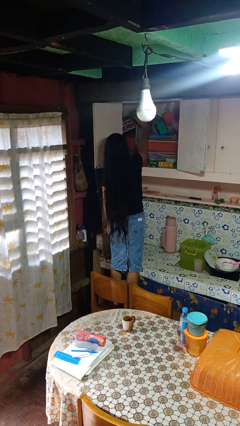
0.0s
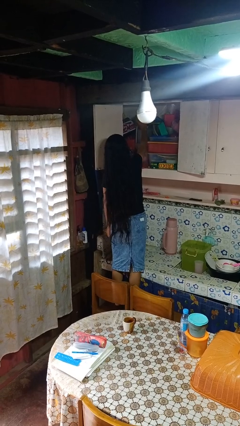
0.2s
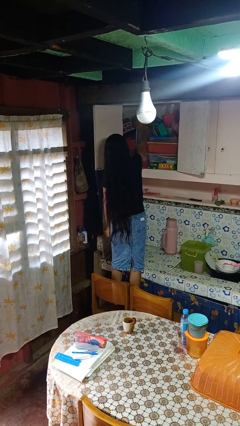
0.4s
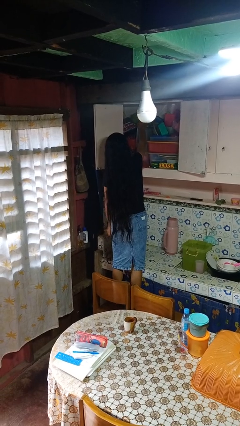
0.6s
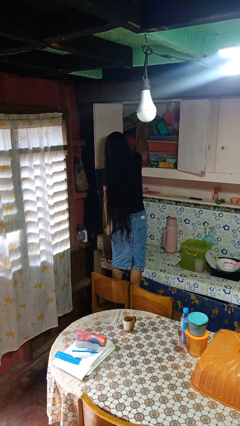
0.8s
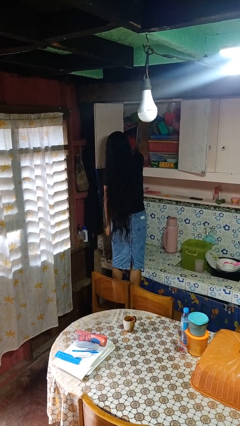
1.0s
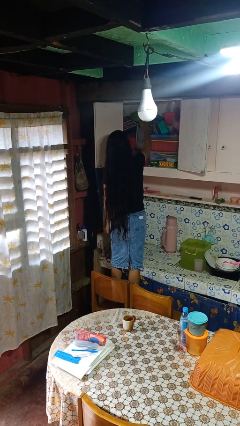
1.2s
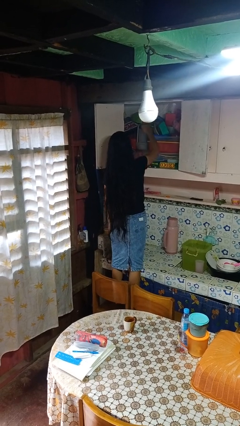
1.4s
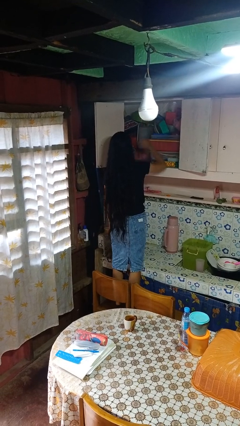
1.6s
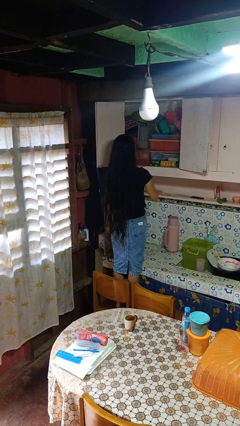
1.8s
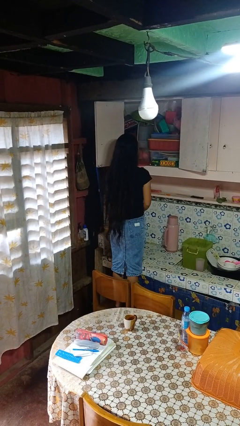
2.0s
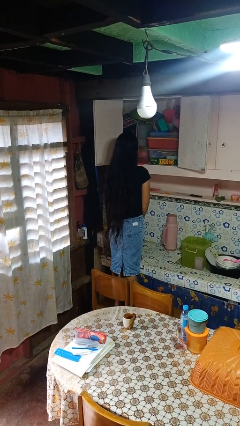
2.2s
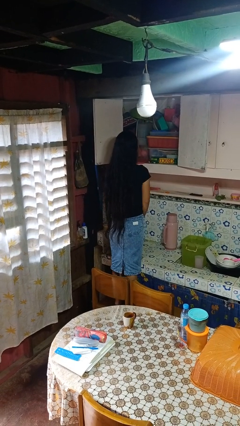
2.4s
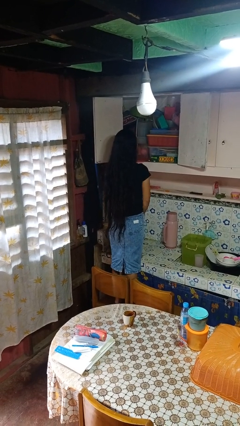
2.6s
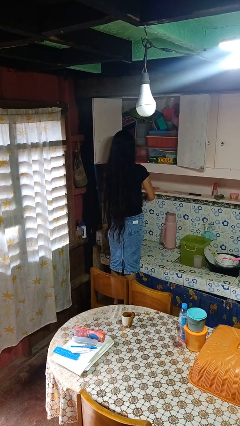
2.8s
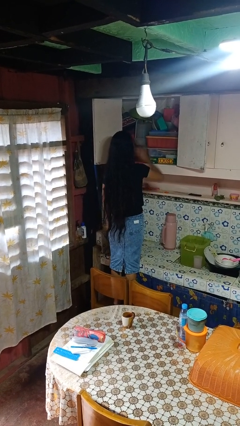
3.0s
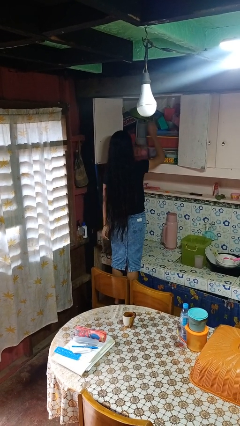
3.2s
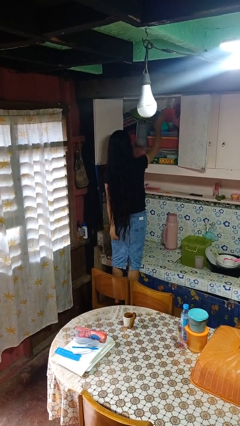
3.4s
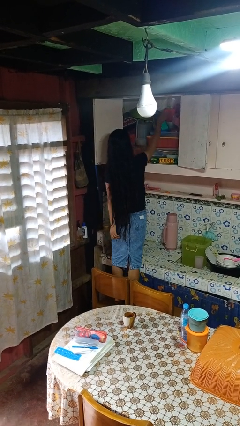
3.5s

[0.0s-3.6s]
person puts object in cabinet

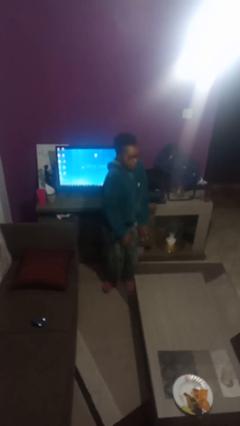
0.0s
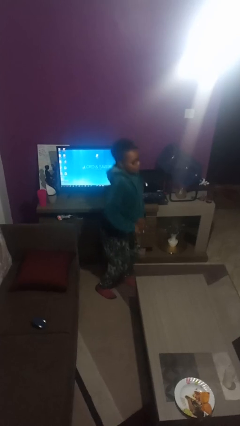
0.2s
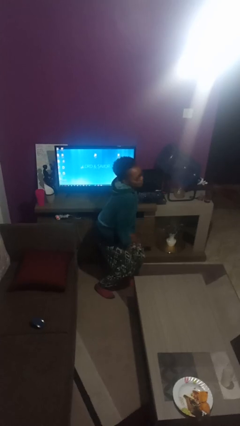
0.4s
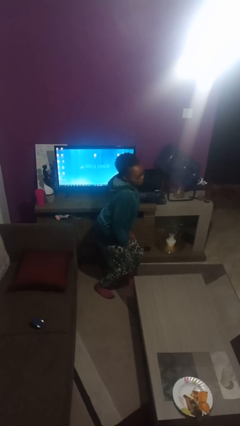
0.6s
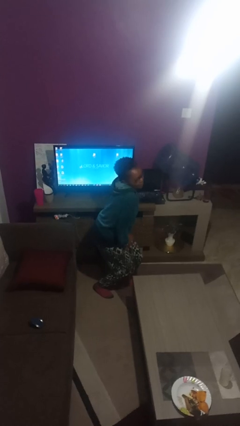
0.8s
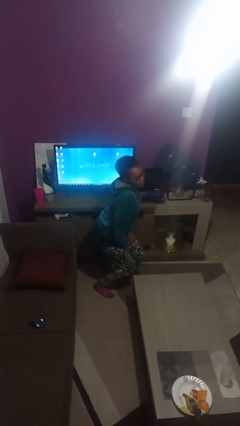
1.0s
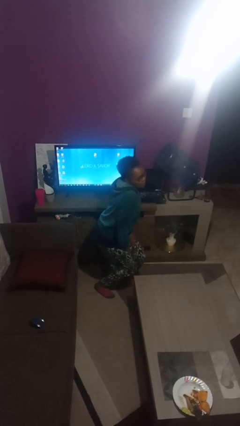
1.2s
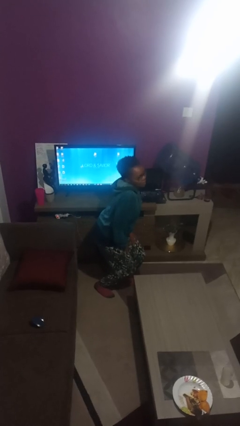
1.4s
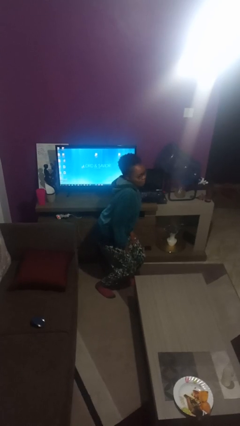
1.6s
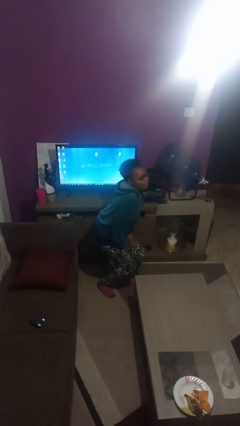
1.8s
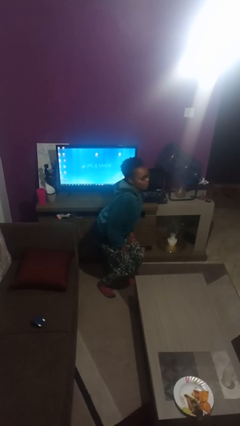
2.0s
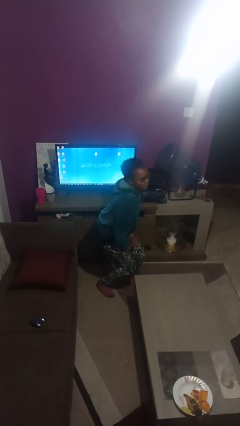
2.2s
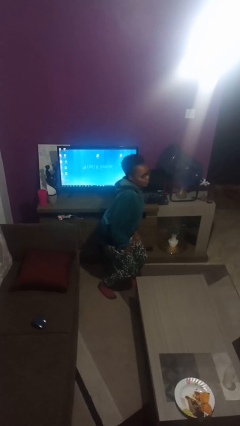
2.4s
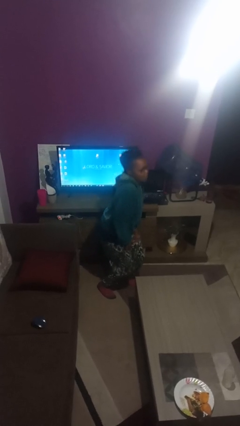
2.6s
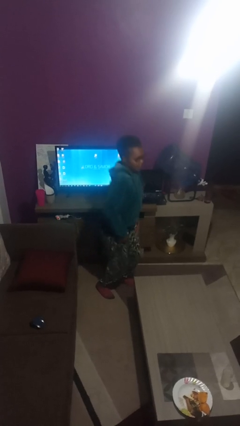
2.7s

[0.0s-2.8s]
person dances in place

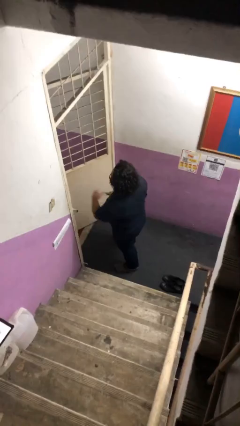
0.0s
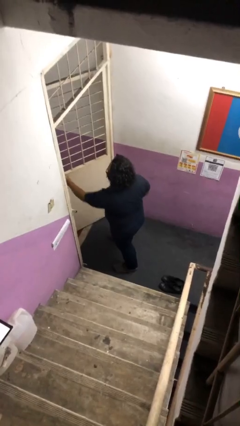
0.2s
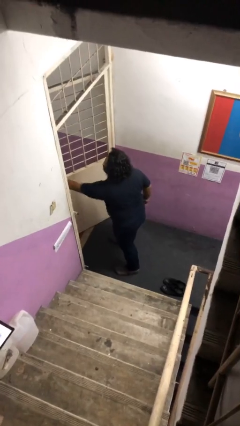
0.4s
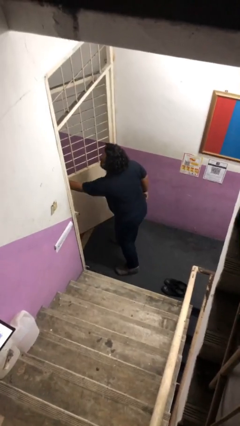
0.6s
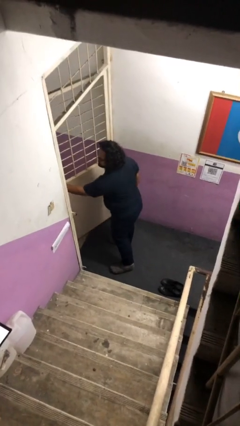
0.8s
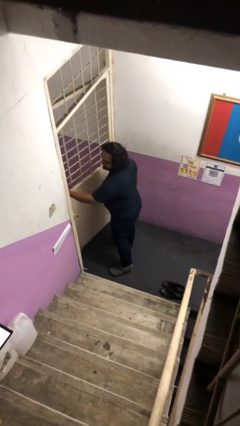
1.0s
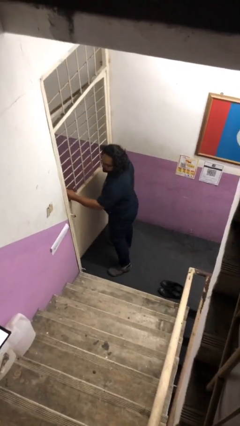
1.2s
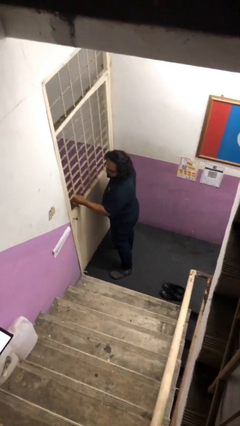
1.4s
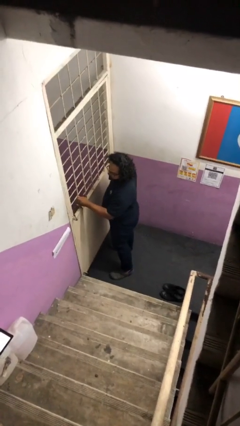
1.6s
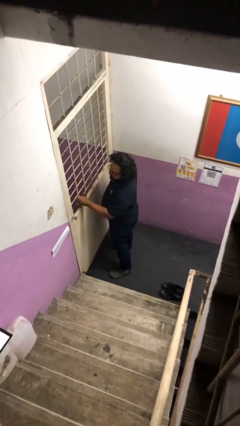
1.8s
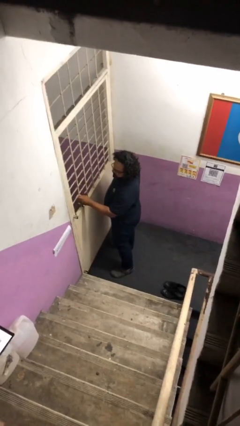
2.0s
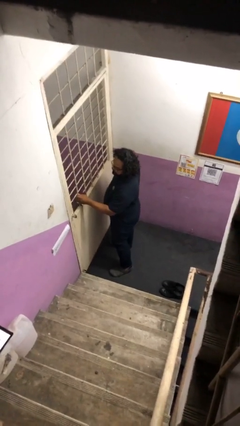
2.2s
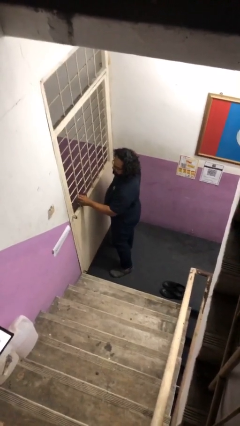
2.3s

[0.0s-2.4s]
person closes facility door

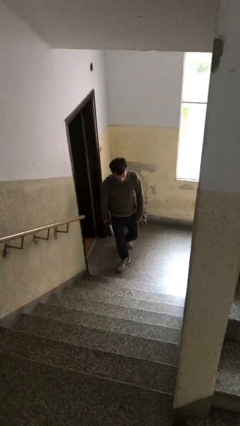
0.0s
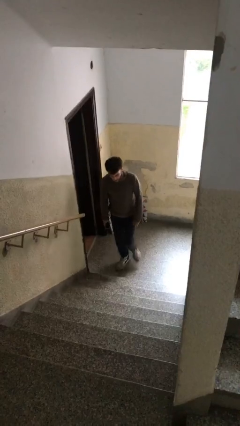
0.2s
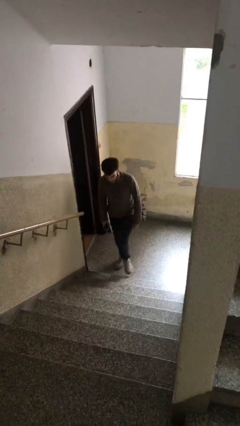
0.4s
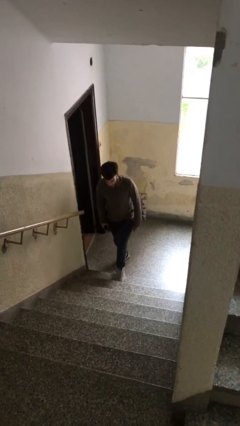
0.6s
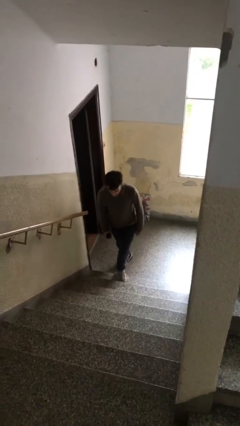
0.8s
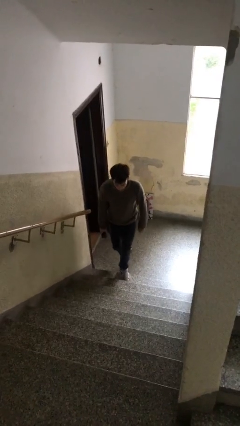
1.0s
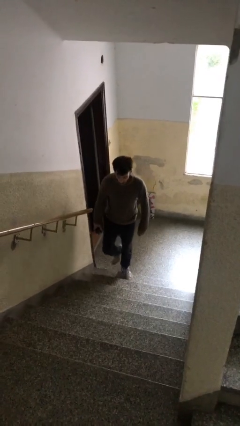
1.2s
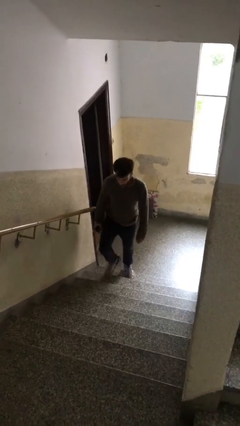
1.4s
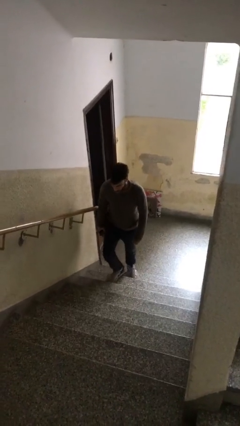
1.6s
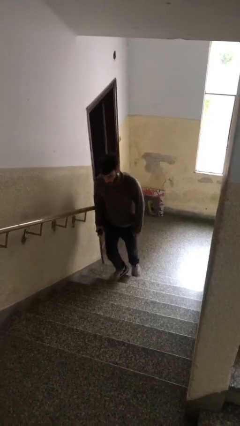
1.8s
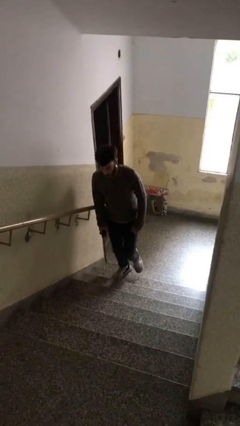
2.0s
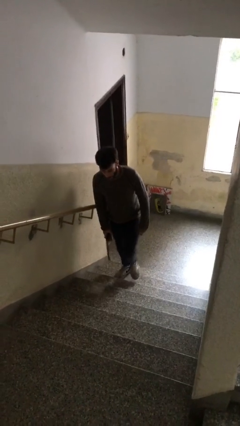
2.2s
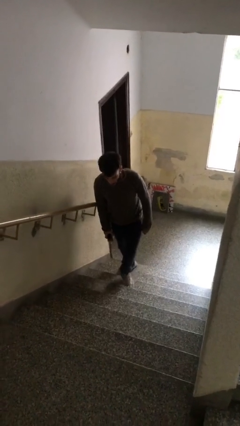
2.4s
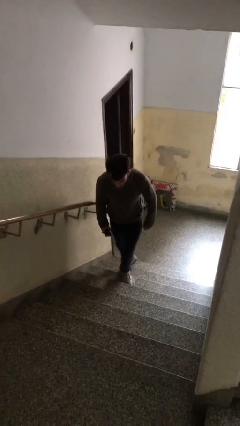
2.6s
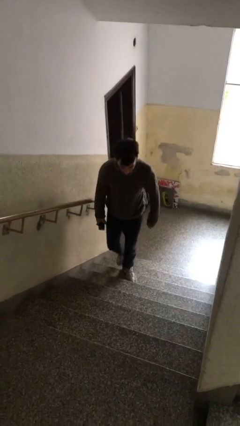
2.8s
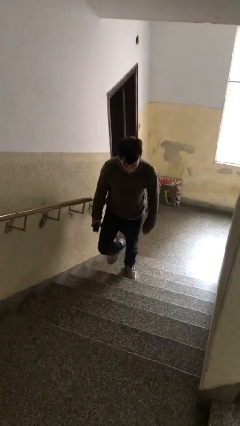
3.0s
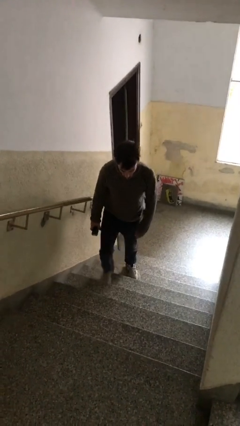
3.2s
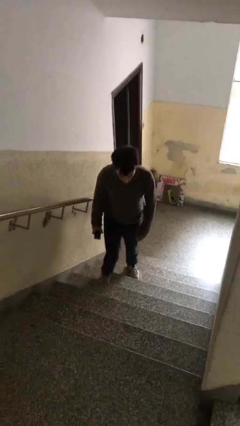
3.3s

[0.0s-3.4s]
person climbs up stairs

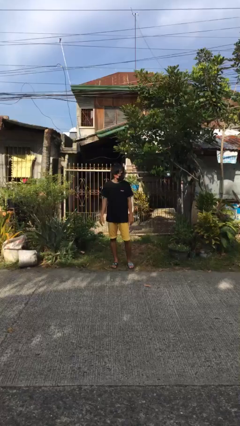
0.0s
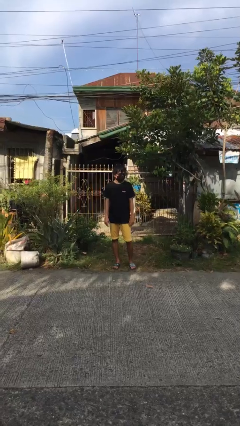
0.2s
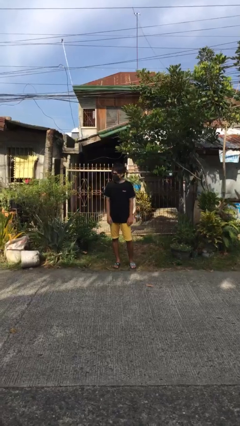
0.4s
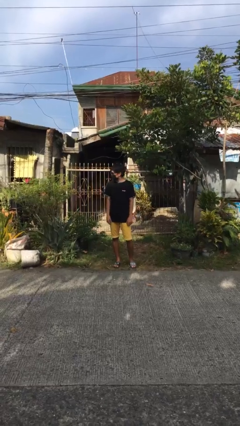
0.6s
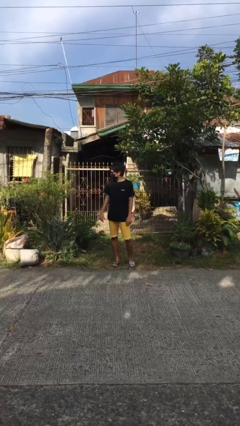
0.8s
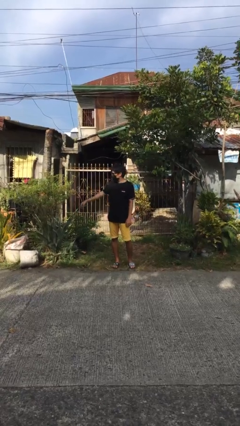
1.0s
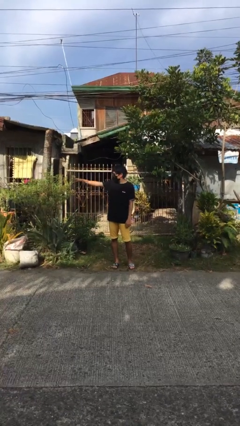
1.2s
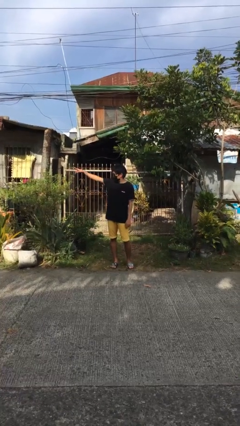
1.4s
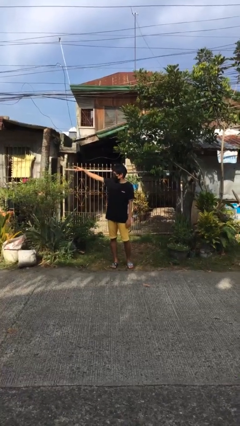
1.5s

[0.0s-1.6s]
person points at person

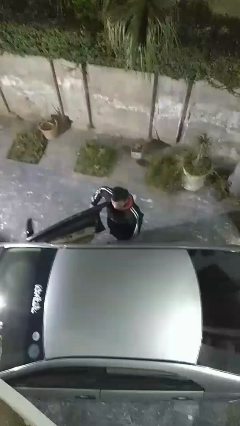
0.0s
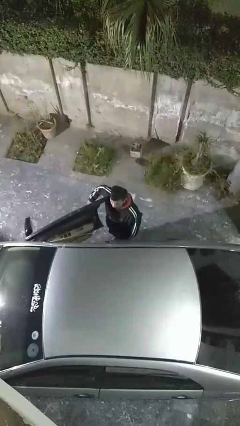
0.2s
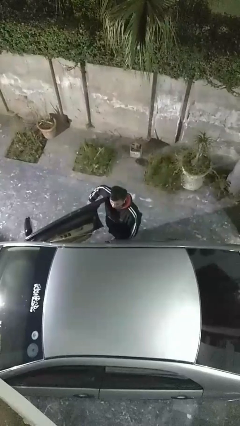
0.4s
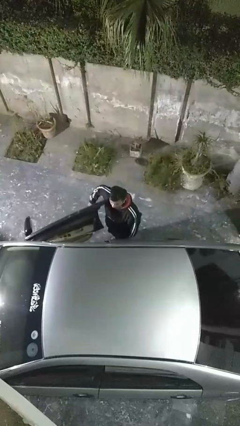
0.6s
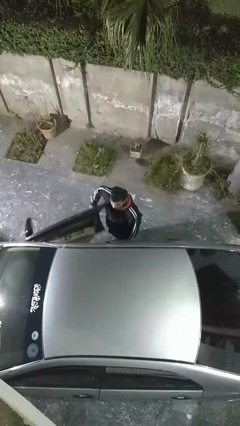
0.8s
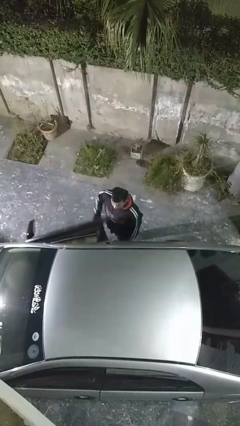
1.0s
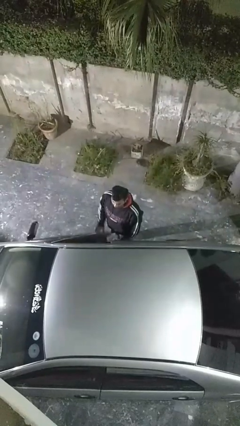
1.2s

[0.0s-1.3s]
person closes car door

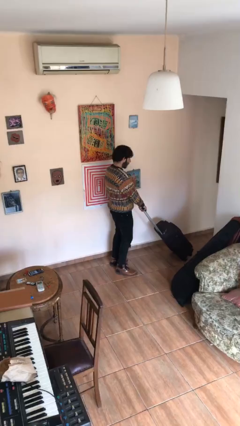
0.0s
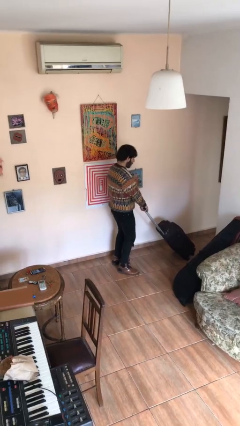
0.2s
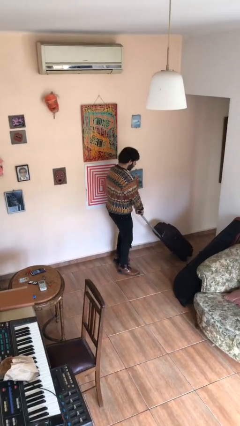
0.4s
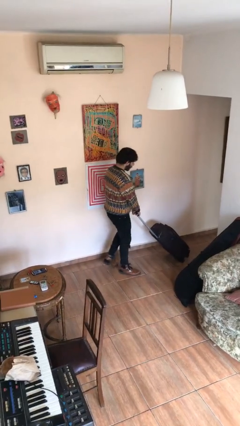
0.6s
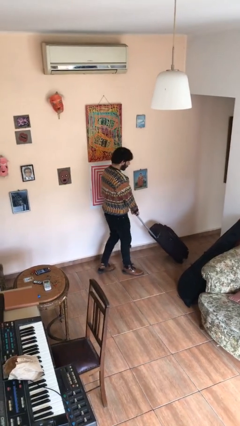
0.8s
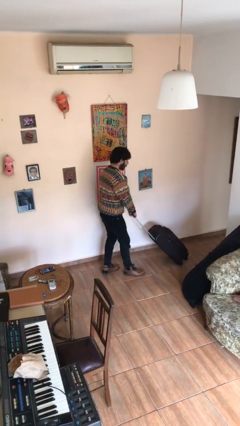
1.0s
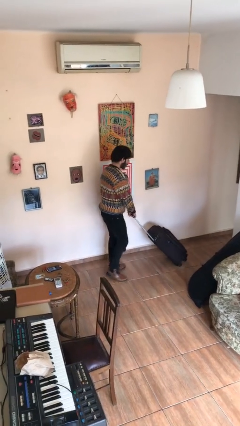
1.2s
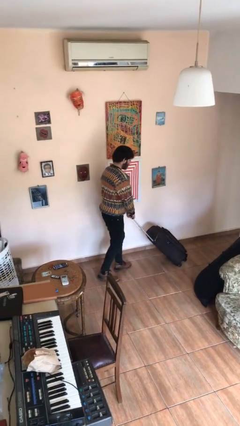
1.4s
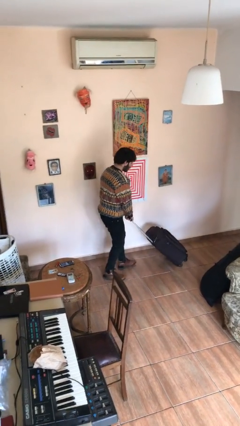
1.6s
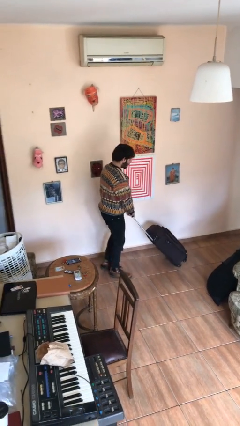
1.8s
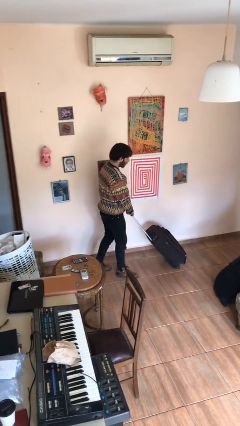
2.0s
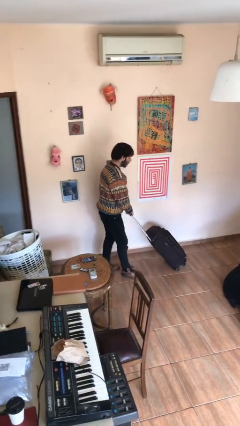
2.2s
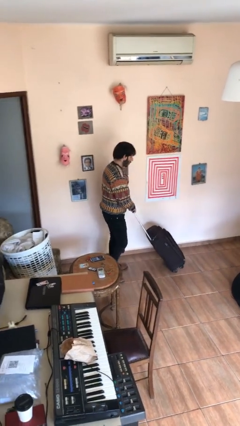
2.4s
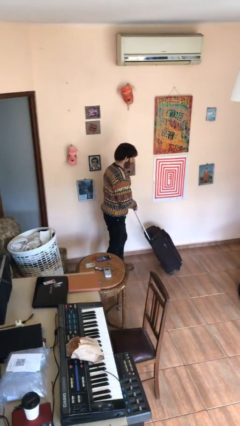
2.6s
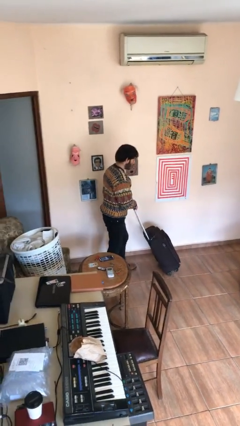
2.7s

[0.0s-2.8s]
person pulls wheeled cart
